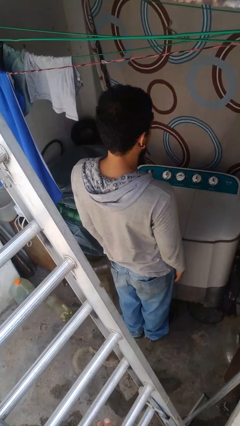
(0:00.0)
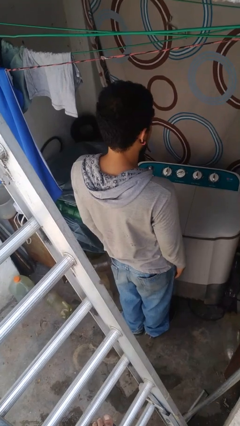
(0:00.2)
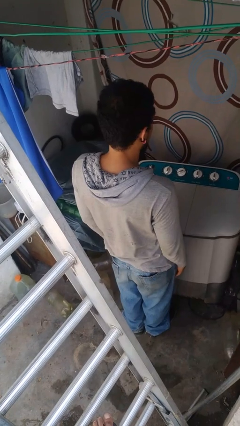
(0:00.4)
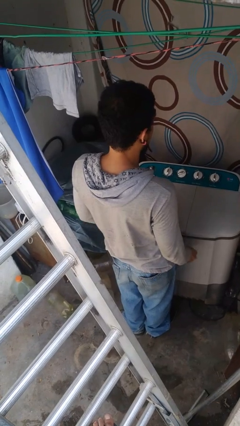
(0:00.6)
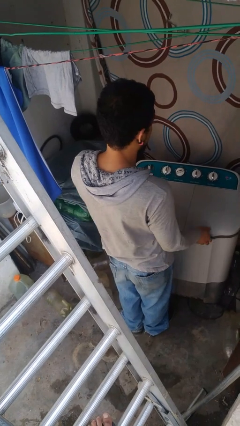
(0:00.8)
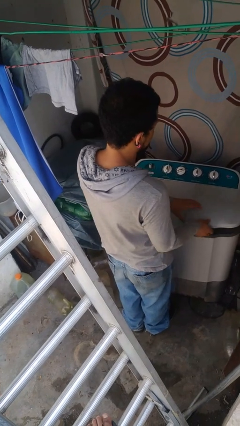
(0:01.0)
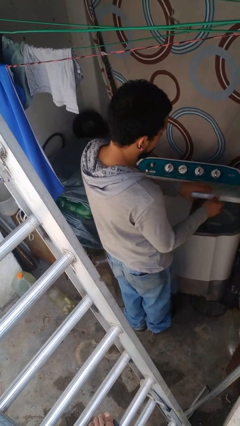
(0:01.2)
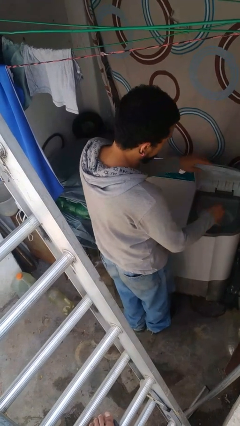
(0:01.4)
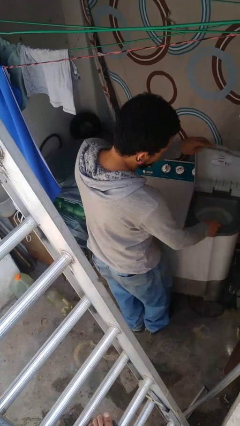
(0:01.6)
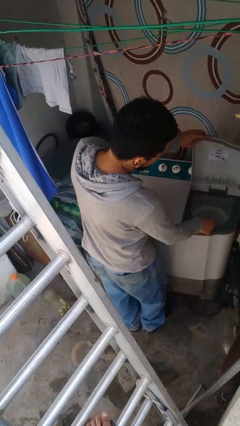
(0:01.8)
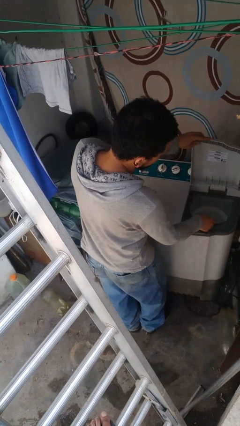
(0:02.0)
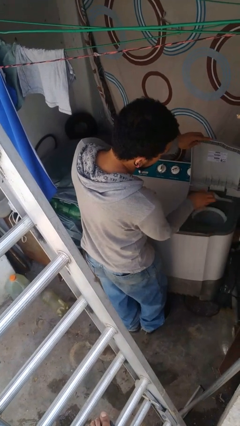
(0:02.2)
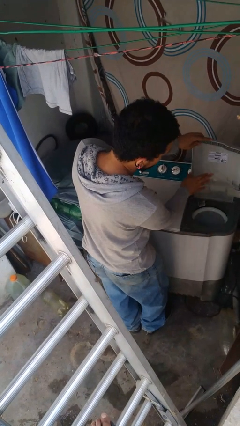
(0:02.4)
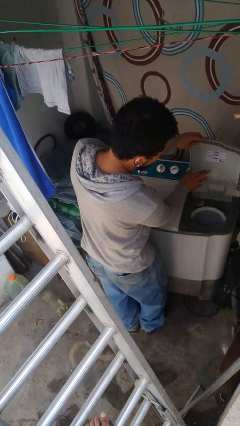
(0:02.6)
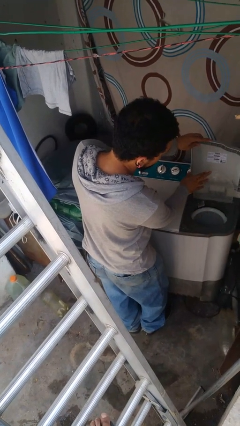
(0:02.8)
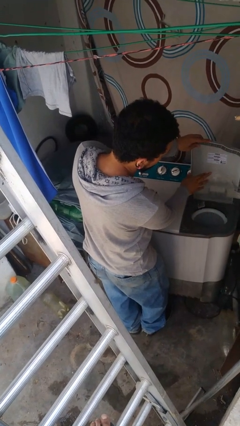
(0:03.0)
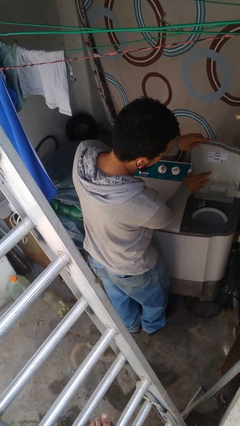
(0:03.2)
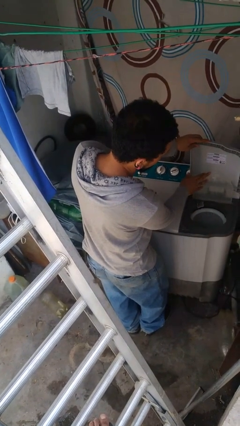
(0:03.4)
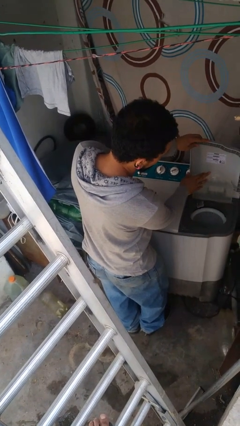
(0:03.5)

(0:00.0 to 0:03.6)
person opens clothes washer

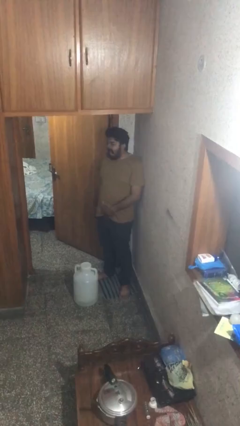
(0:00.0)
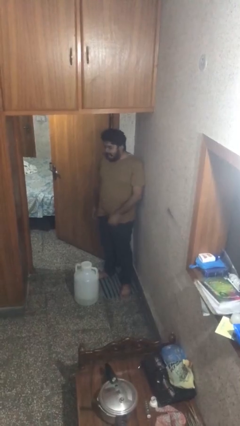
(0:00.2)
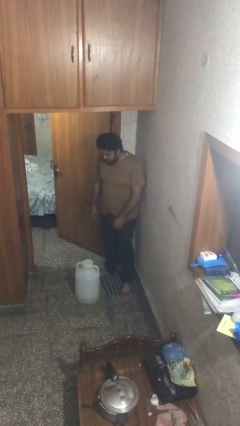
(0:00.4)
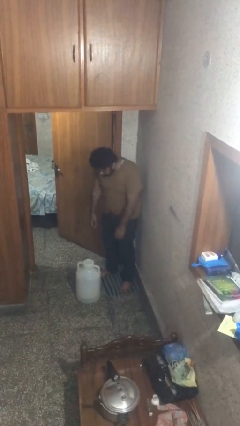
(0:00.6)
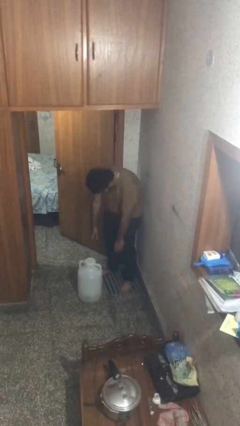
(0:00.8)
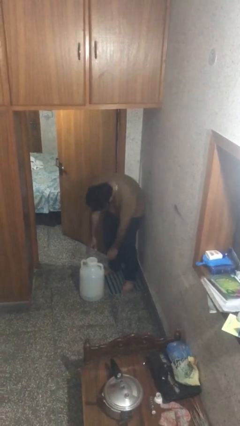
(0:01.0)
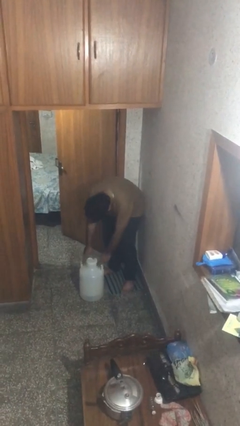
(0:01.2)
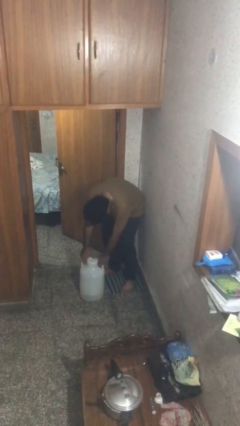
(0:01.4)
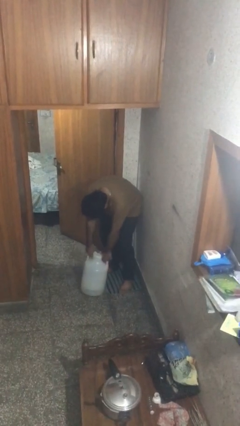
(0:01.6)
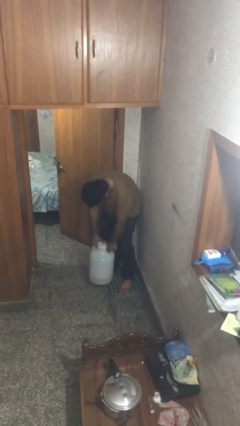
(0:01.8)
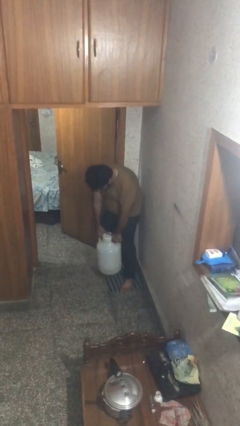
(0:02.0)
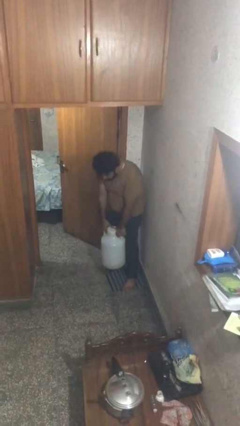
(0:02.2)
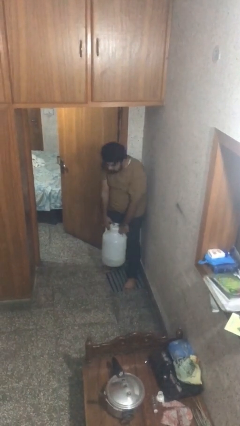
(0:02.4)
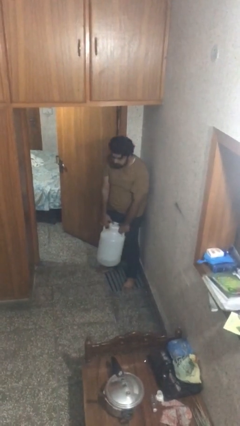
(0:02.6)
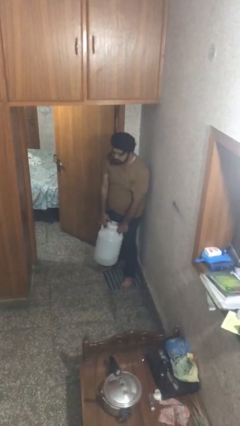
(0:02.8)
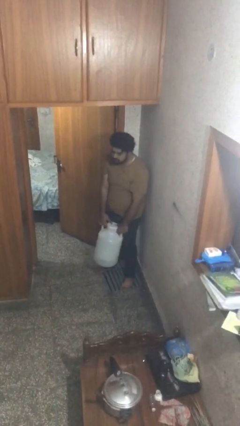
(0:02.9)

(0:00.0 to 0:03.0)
person picks up object from floor

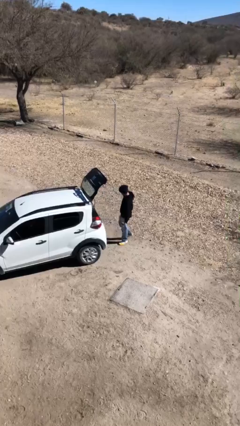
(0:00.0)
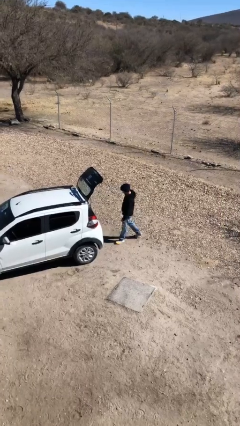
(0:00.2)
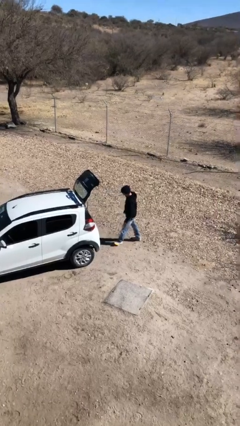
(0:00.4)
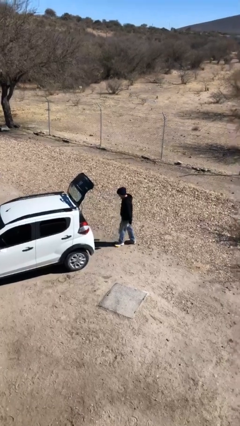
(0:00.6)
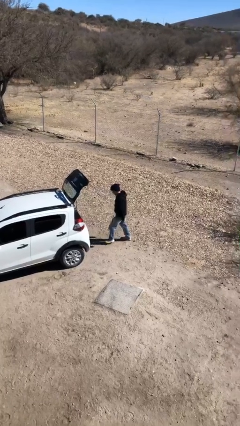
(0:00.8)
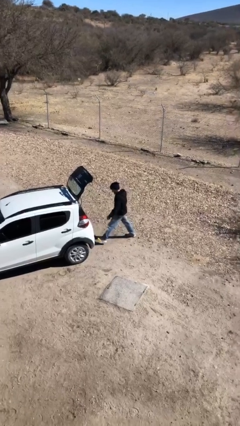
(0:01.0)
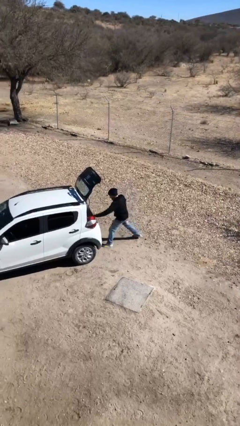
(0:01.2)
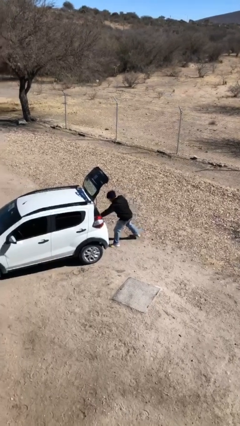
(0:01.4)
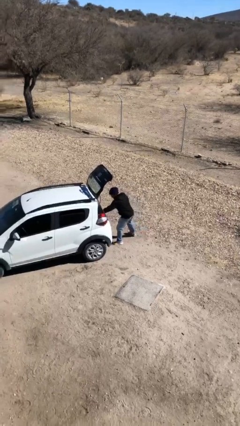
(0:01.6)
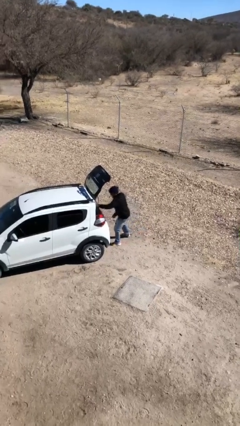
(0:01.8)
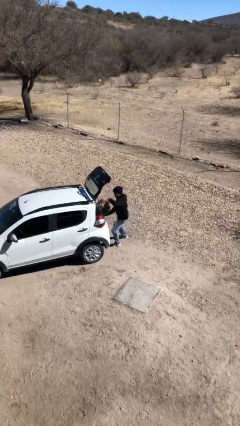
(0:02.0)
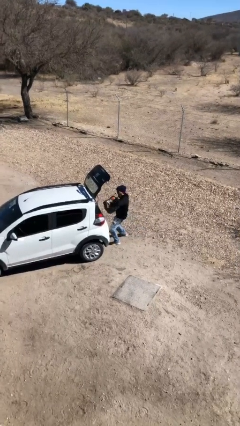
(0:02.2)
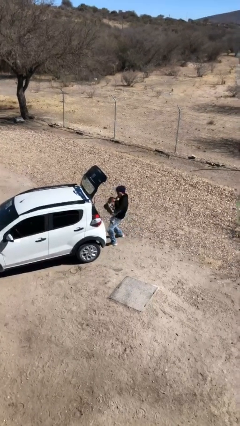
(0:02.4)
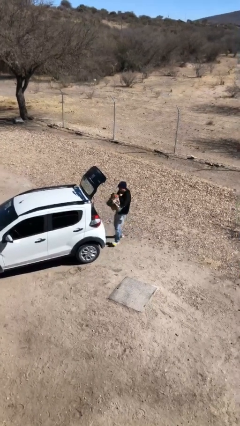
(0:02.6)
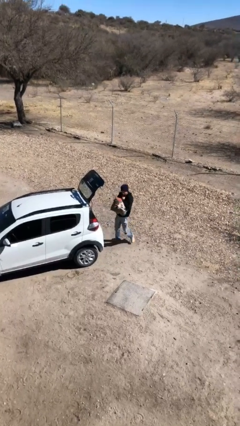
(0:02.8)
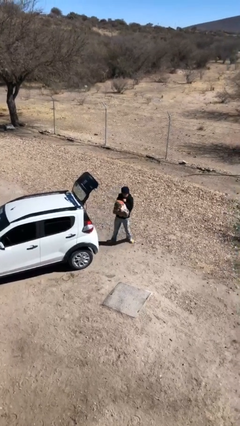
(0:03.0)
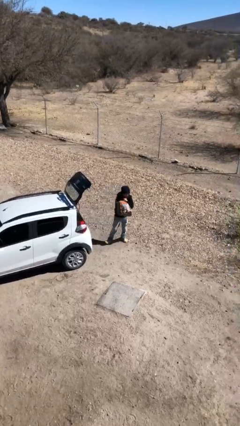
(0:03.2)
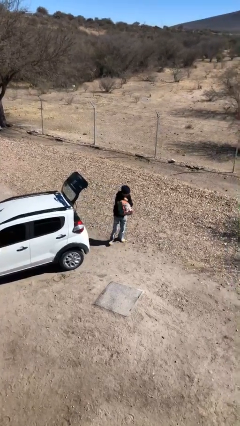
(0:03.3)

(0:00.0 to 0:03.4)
person unloads car

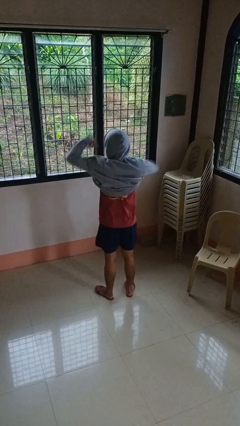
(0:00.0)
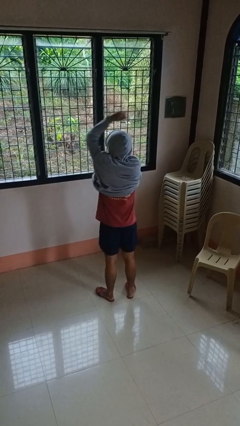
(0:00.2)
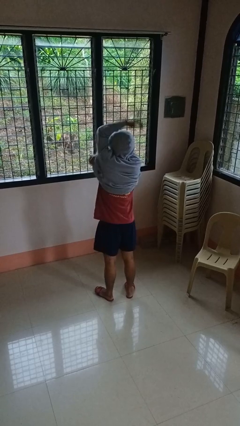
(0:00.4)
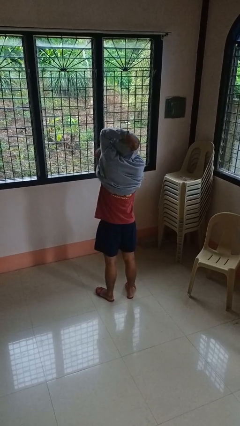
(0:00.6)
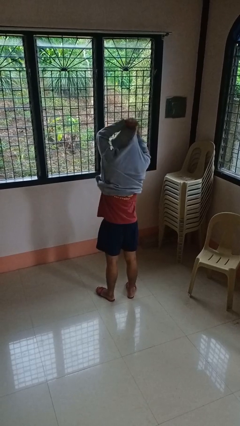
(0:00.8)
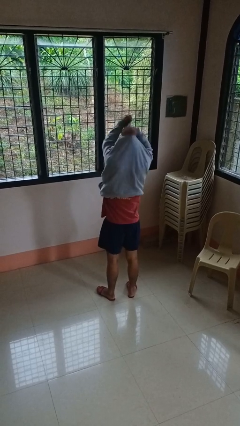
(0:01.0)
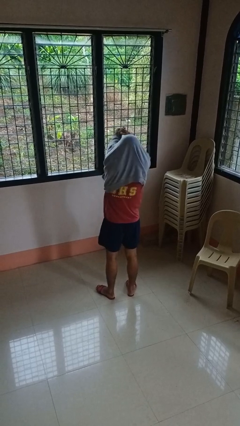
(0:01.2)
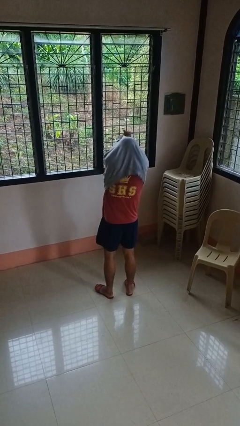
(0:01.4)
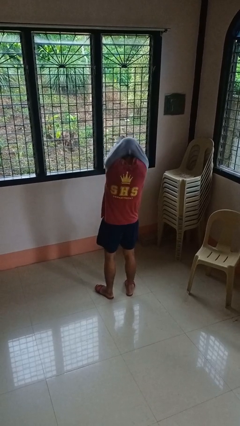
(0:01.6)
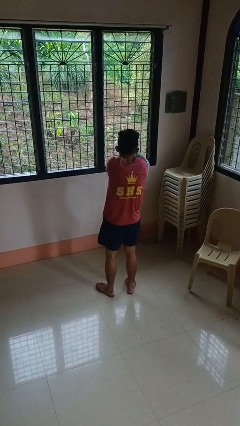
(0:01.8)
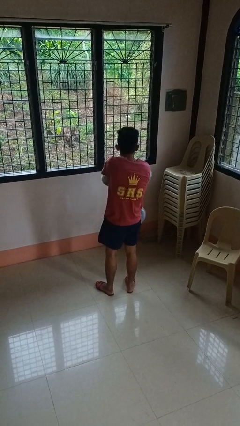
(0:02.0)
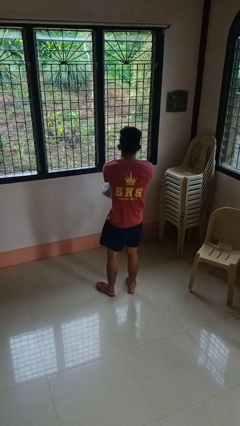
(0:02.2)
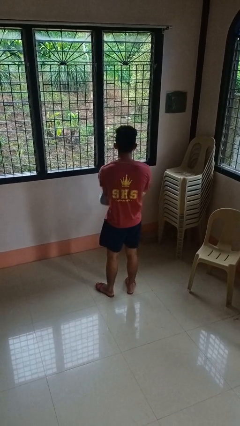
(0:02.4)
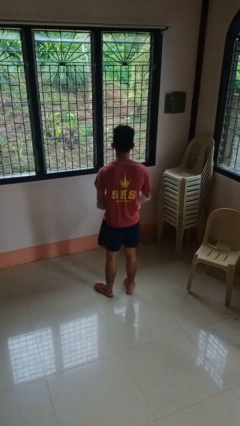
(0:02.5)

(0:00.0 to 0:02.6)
person takes off hoodie

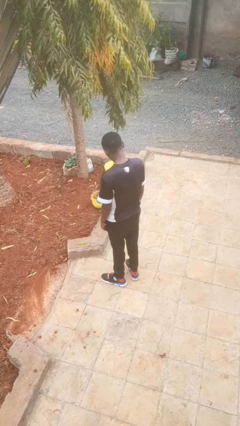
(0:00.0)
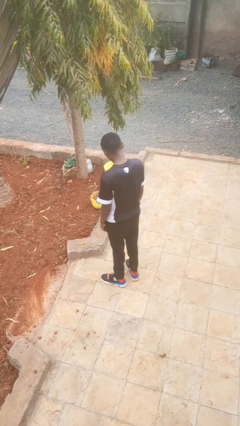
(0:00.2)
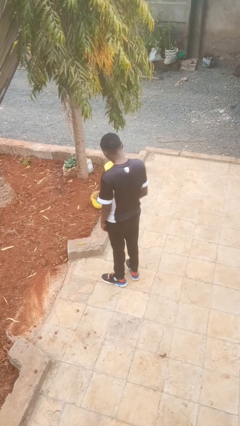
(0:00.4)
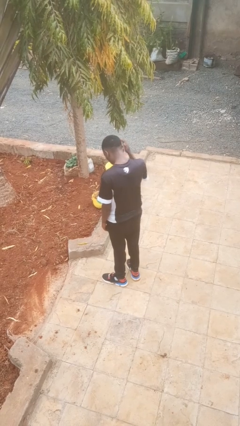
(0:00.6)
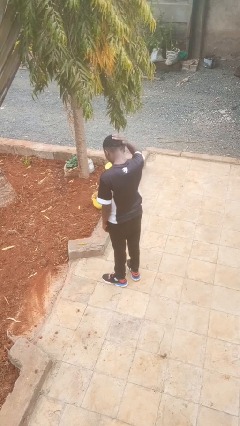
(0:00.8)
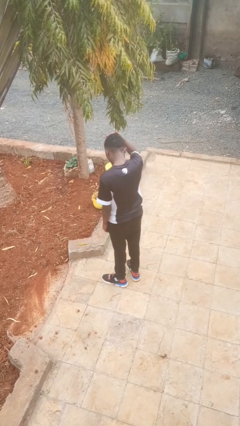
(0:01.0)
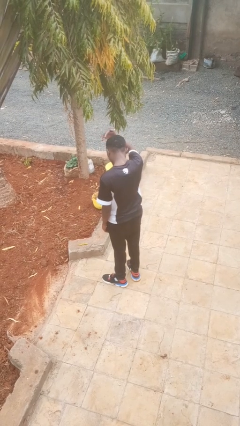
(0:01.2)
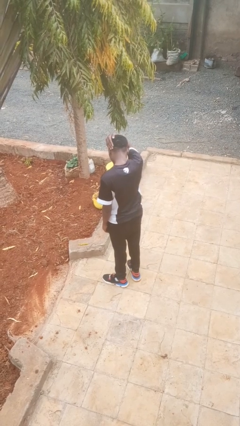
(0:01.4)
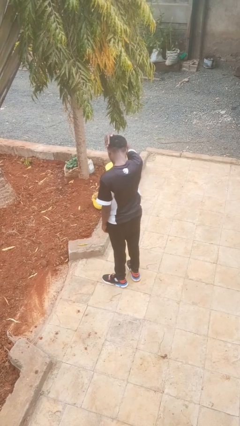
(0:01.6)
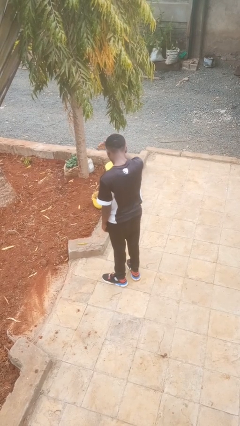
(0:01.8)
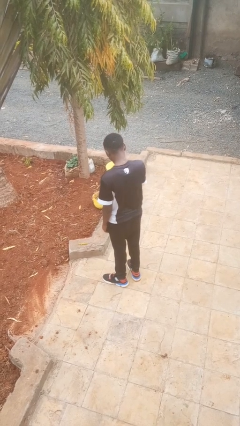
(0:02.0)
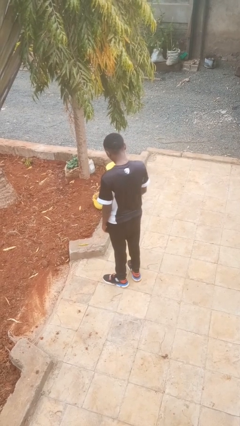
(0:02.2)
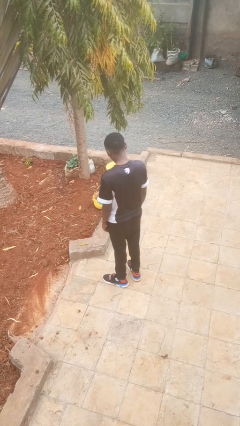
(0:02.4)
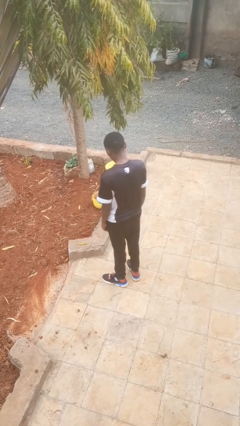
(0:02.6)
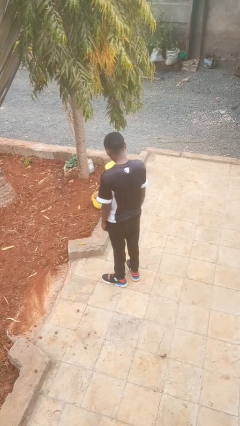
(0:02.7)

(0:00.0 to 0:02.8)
person pats head

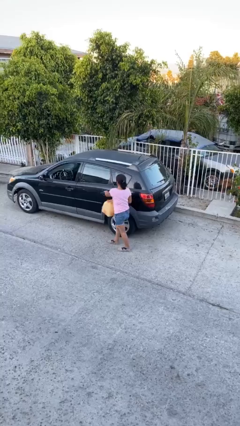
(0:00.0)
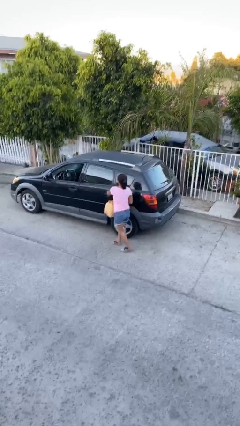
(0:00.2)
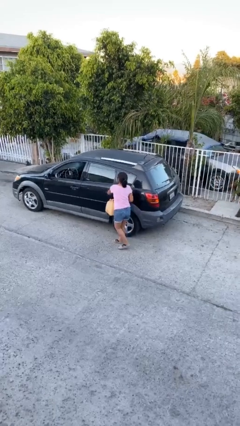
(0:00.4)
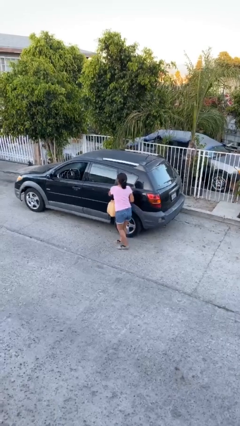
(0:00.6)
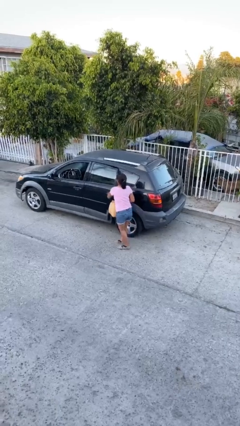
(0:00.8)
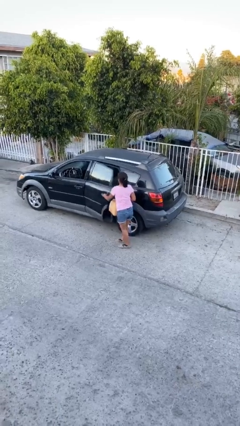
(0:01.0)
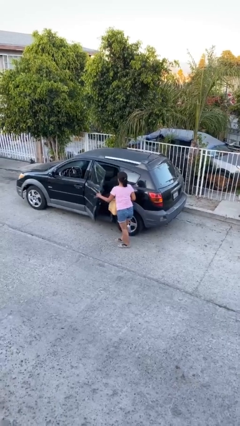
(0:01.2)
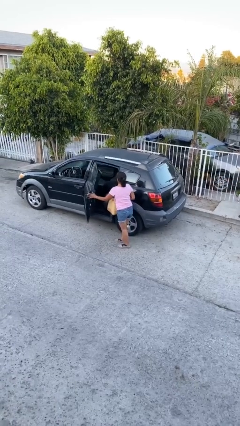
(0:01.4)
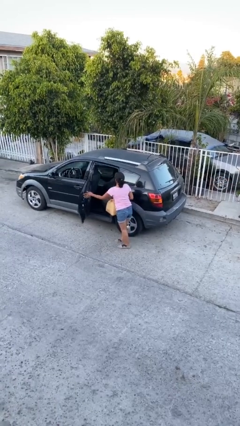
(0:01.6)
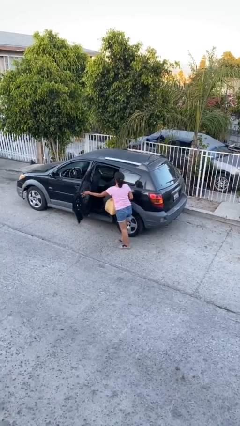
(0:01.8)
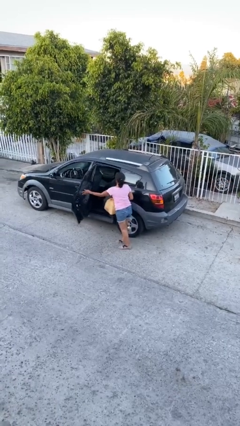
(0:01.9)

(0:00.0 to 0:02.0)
person opens car door
